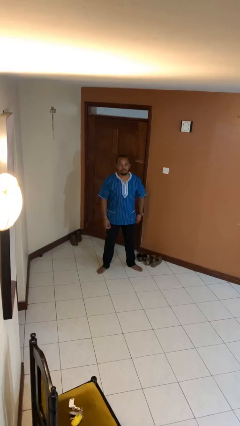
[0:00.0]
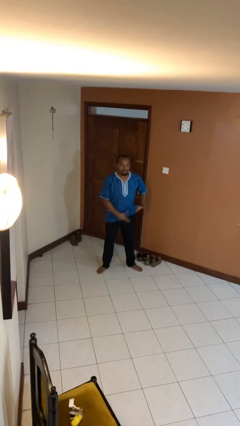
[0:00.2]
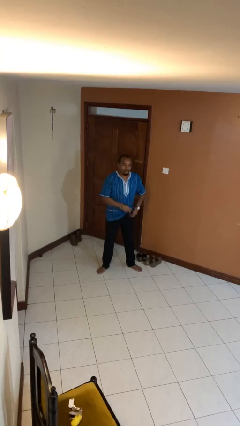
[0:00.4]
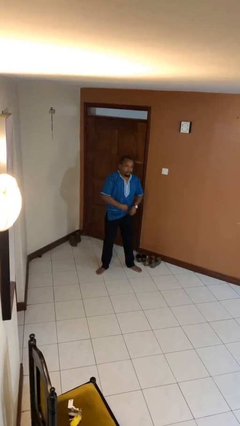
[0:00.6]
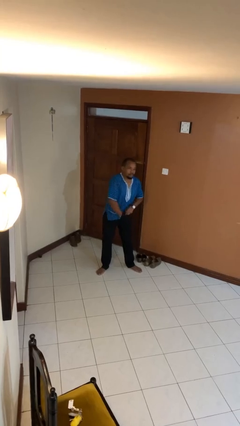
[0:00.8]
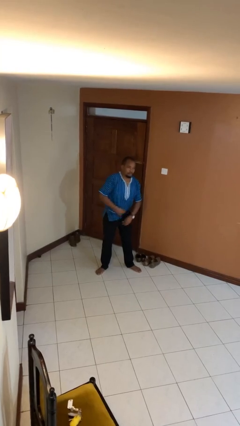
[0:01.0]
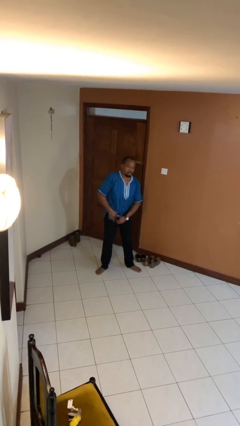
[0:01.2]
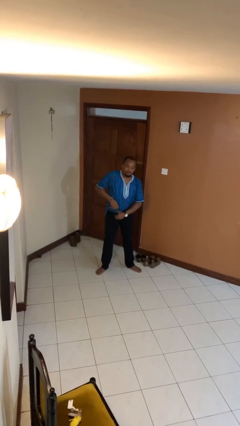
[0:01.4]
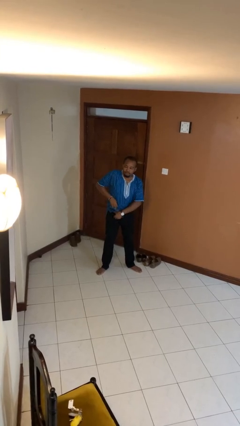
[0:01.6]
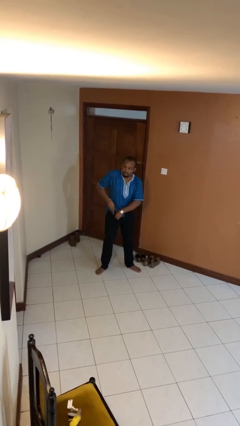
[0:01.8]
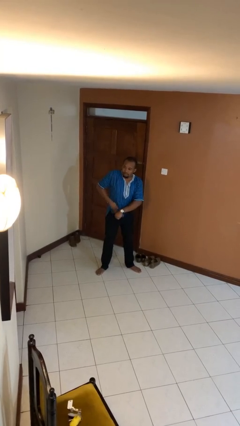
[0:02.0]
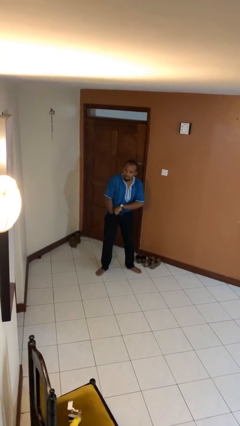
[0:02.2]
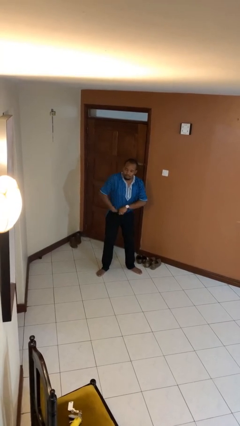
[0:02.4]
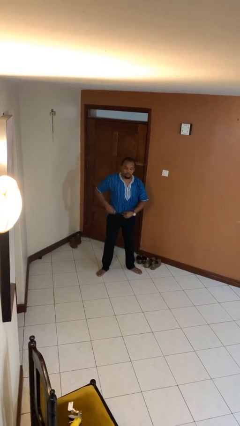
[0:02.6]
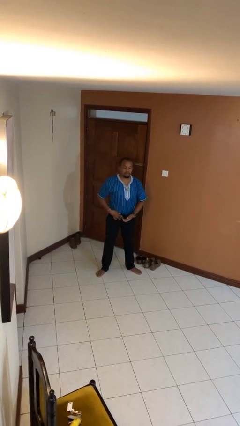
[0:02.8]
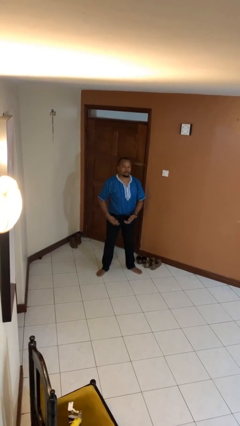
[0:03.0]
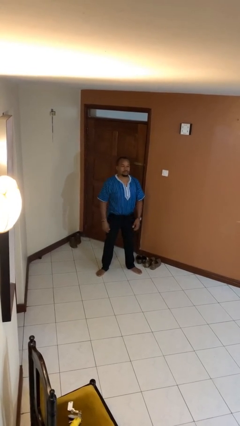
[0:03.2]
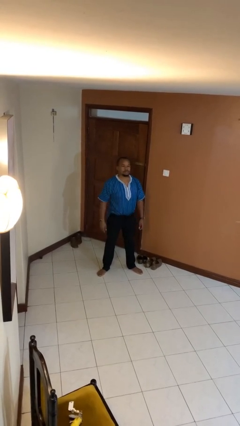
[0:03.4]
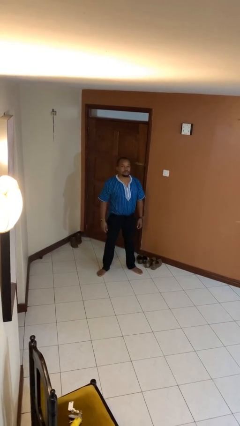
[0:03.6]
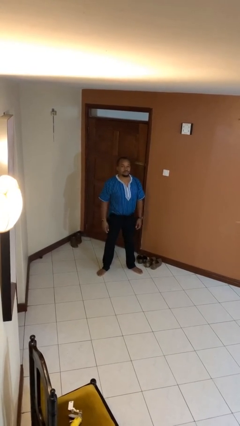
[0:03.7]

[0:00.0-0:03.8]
person tucks in shirt

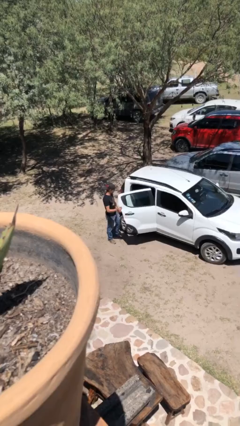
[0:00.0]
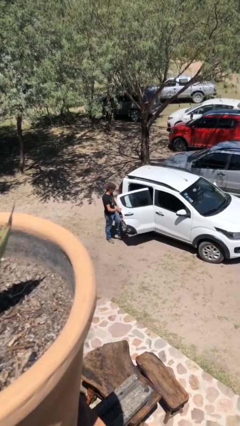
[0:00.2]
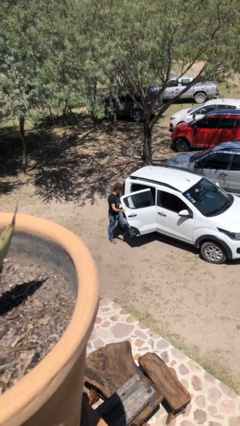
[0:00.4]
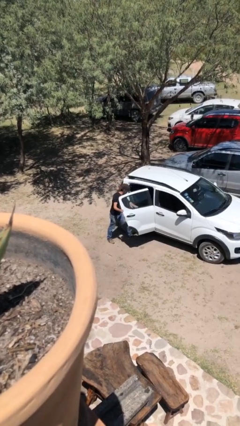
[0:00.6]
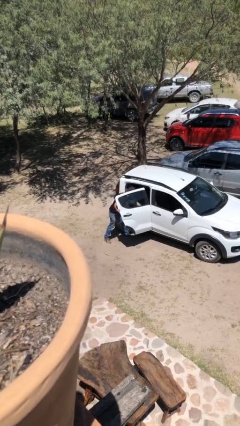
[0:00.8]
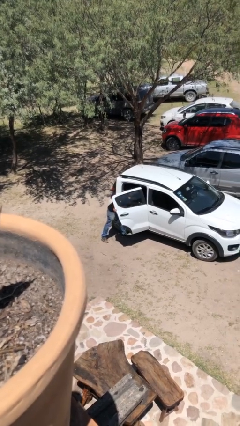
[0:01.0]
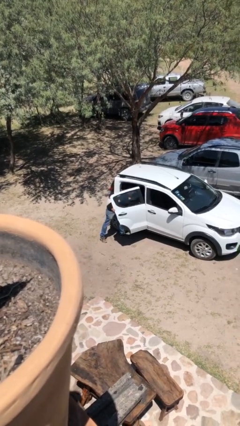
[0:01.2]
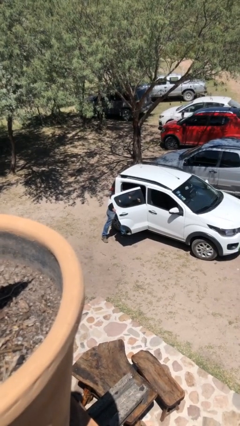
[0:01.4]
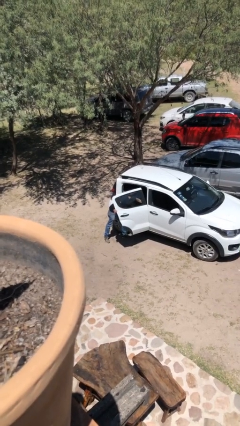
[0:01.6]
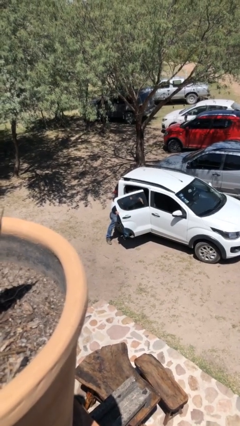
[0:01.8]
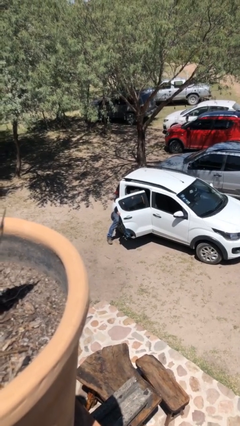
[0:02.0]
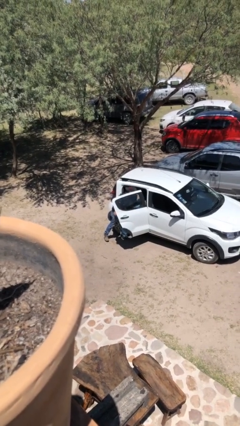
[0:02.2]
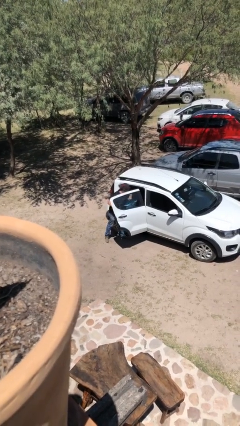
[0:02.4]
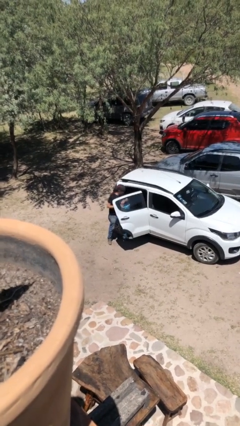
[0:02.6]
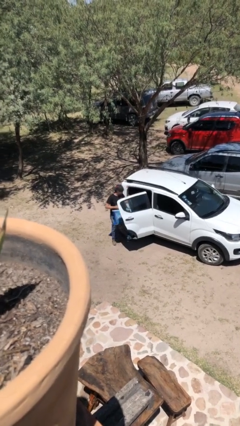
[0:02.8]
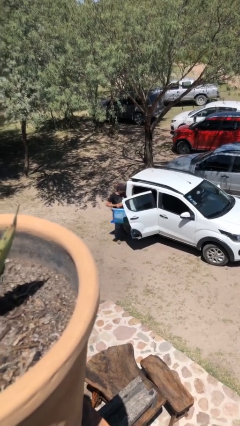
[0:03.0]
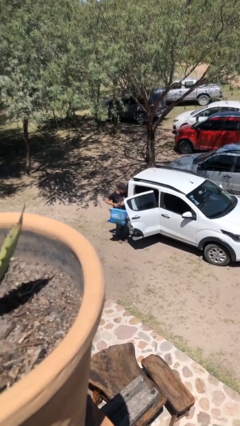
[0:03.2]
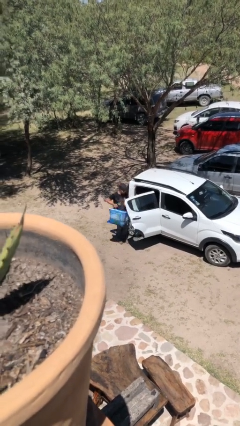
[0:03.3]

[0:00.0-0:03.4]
person unloads car

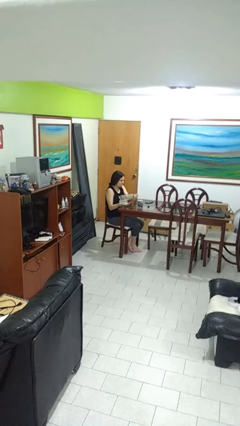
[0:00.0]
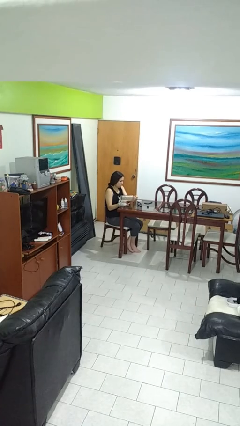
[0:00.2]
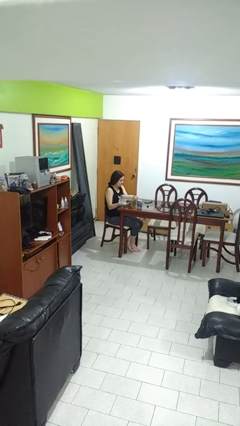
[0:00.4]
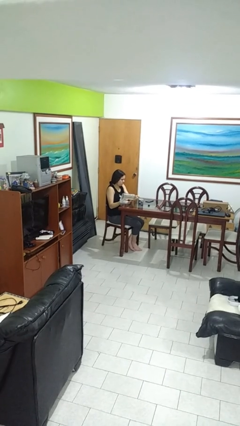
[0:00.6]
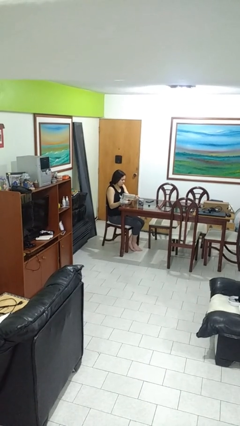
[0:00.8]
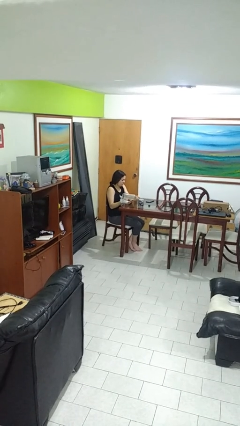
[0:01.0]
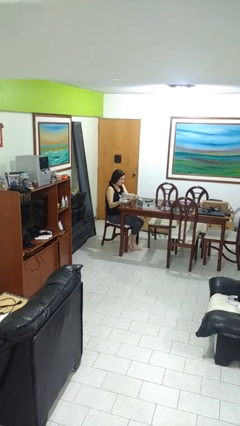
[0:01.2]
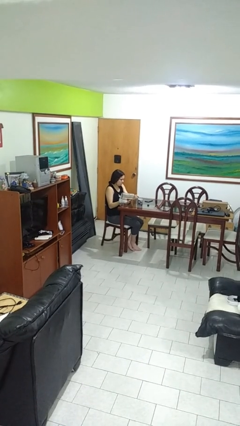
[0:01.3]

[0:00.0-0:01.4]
person pours liquid into cup

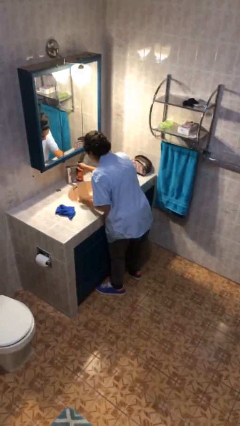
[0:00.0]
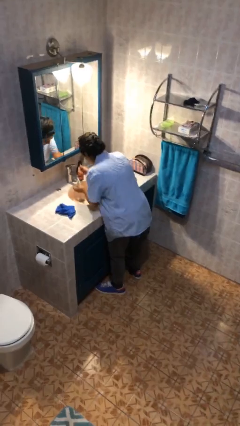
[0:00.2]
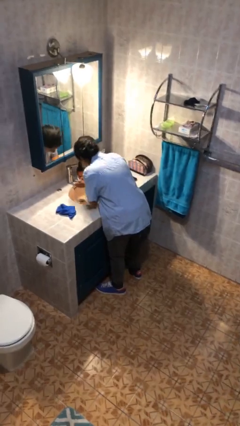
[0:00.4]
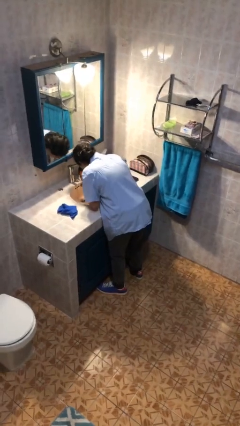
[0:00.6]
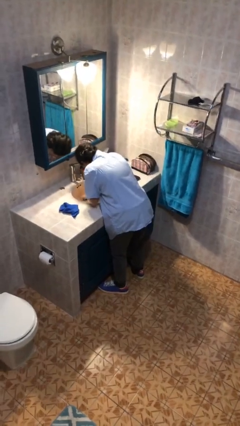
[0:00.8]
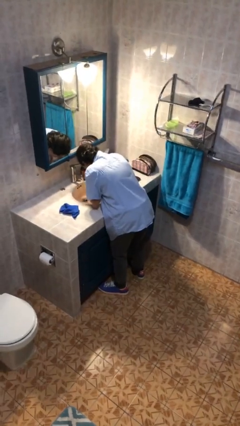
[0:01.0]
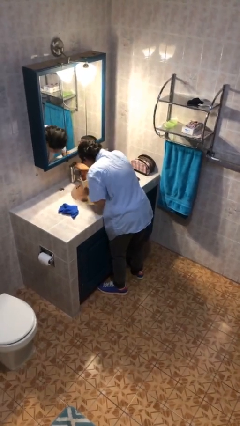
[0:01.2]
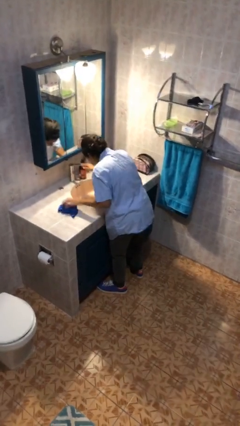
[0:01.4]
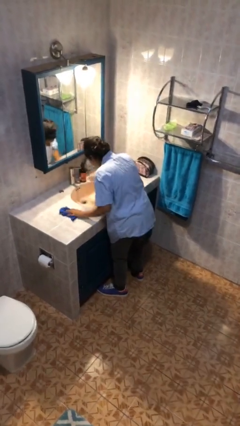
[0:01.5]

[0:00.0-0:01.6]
person washes face

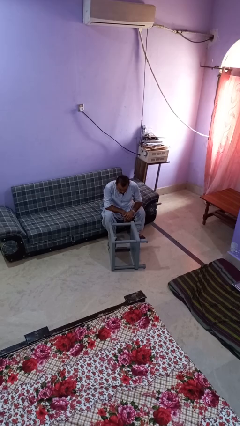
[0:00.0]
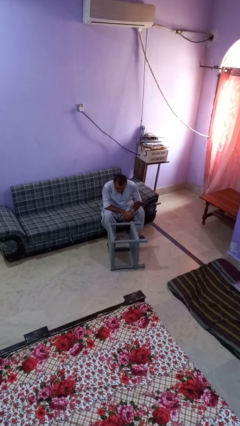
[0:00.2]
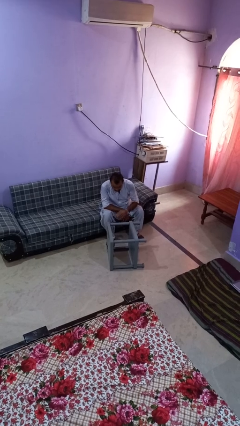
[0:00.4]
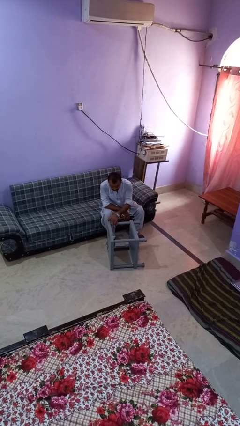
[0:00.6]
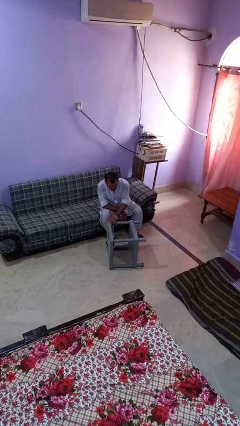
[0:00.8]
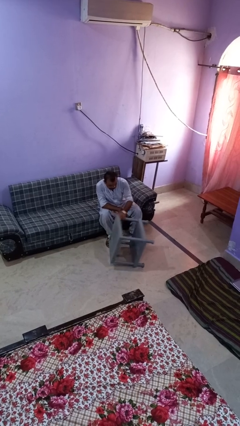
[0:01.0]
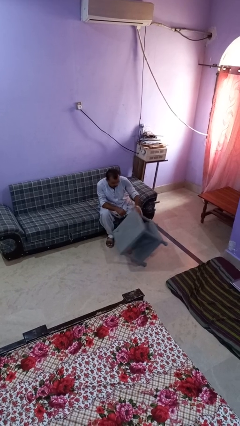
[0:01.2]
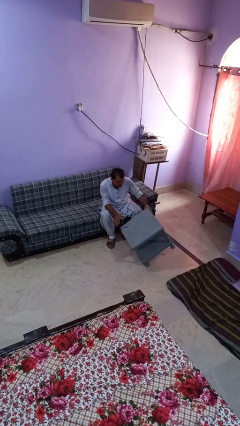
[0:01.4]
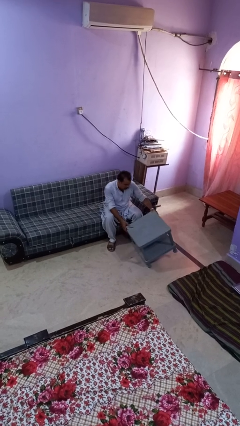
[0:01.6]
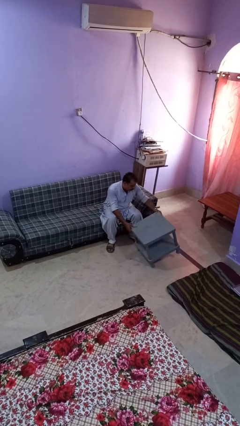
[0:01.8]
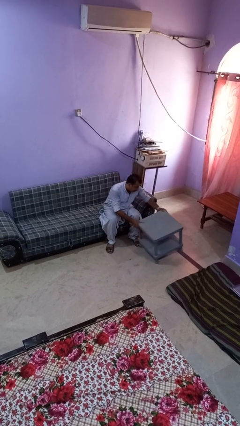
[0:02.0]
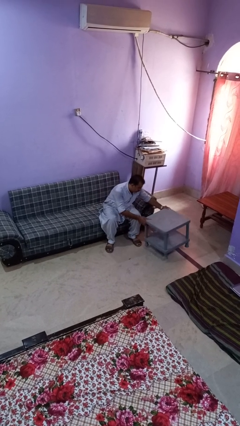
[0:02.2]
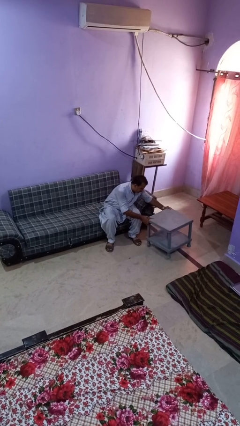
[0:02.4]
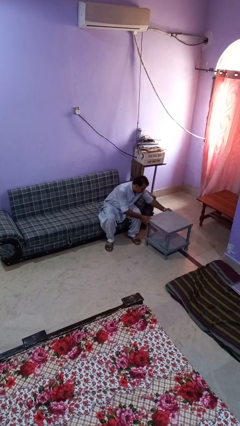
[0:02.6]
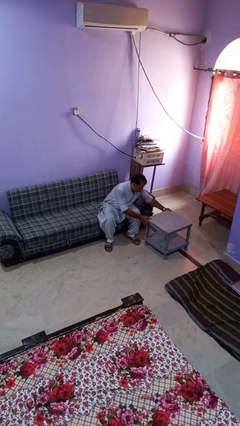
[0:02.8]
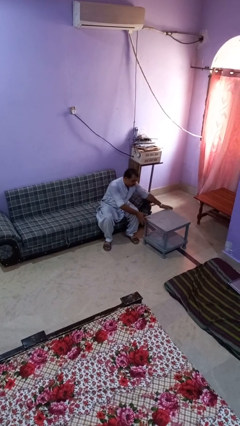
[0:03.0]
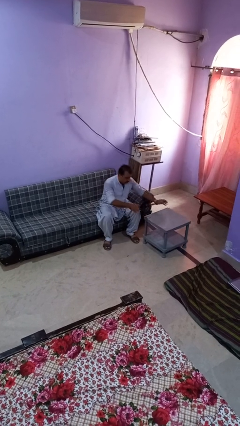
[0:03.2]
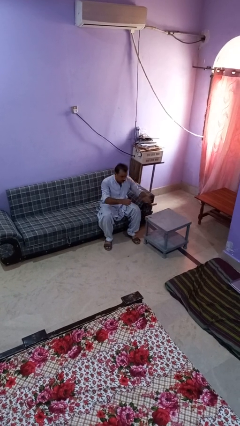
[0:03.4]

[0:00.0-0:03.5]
person sets upright furniture

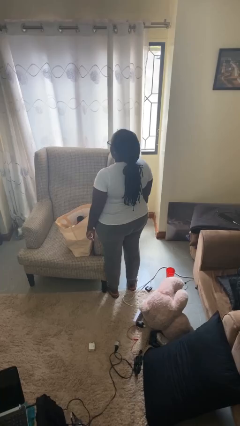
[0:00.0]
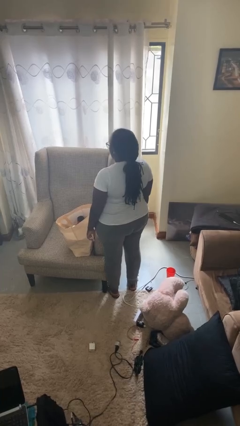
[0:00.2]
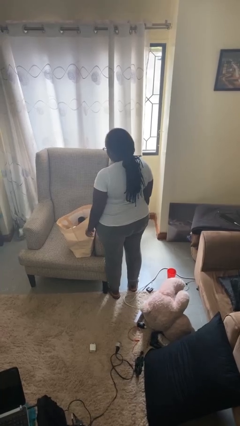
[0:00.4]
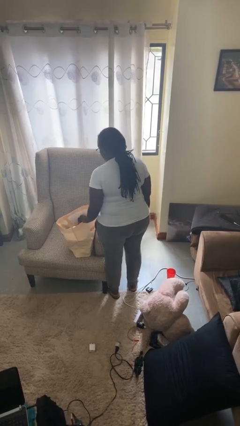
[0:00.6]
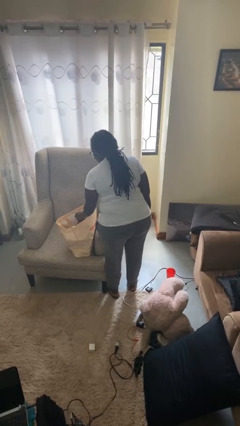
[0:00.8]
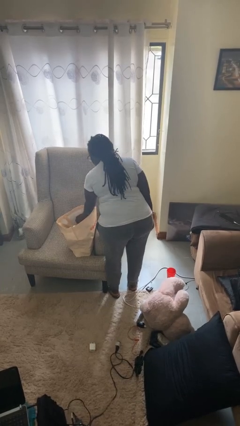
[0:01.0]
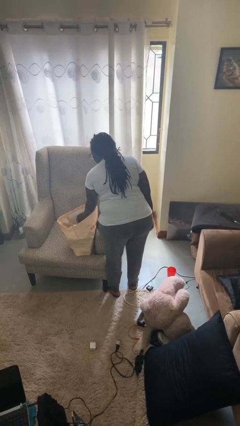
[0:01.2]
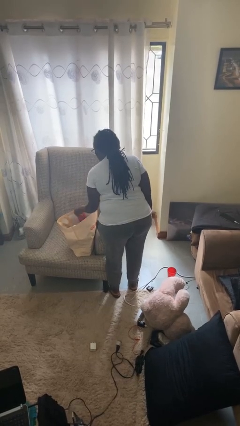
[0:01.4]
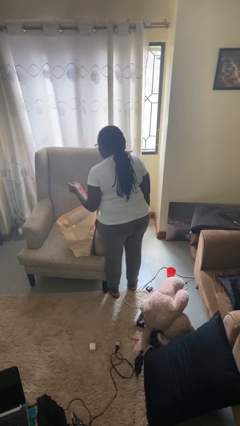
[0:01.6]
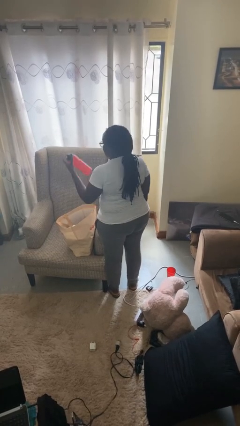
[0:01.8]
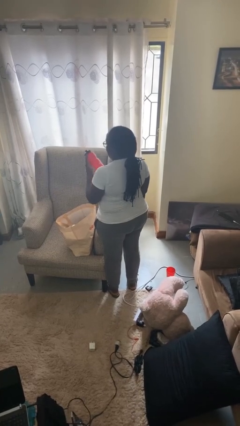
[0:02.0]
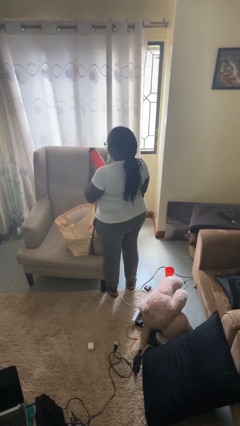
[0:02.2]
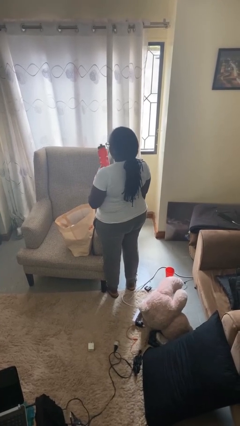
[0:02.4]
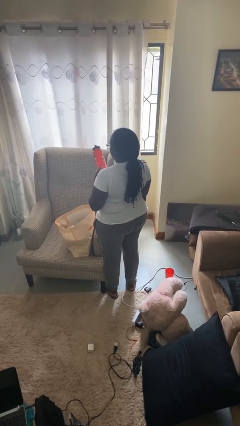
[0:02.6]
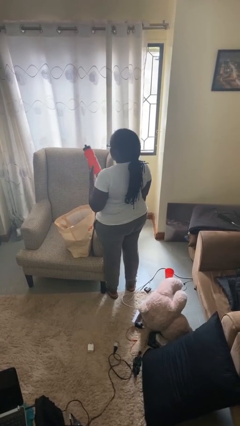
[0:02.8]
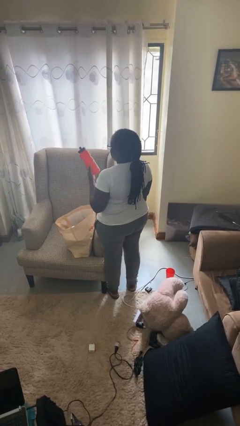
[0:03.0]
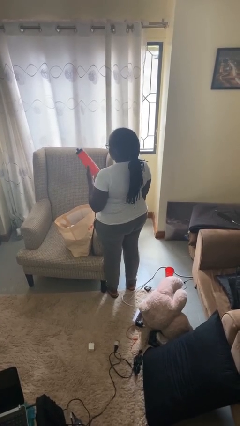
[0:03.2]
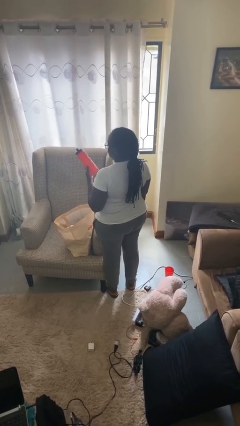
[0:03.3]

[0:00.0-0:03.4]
person takes object from bag

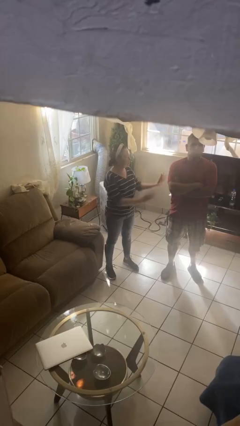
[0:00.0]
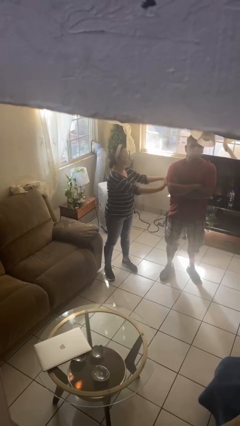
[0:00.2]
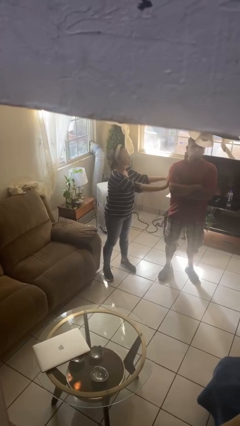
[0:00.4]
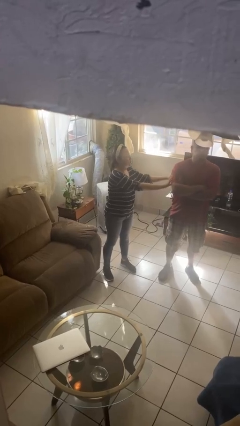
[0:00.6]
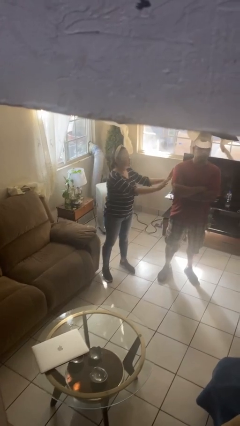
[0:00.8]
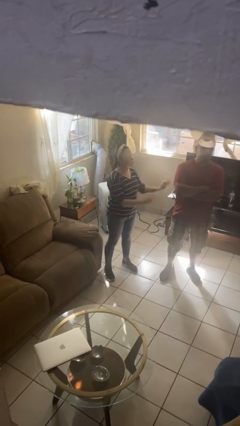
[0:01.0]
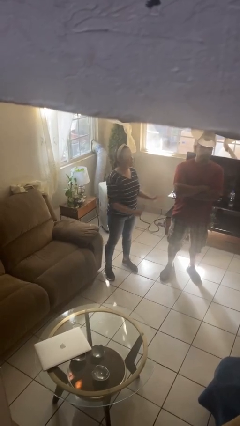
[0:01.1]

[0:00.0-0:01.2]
person shoves person
